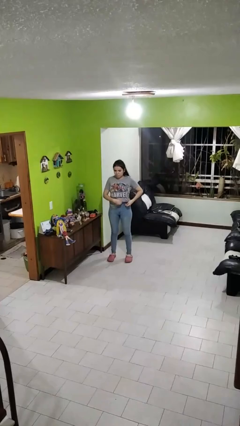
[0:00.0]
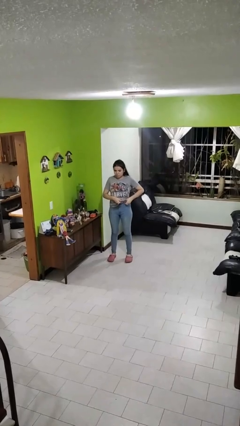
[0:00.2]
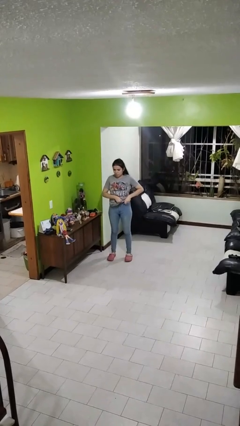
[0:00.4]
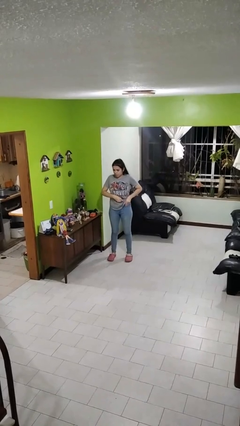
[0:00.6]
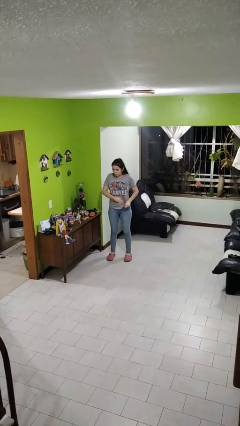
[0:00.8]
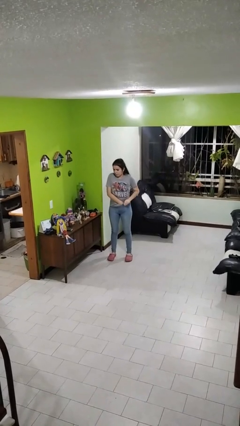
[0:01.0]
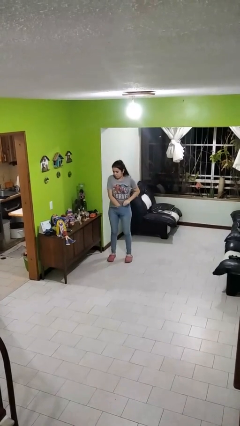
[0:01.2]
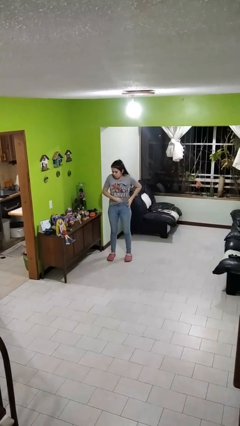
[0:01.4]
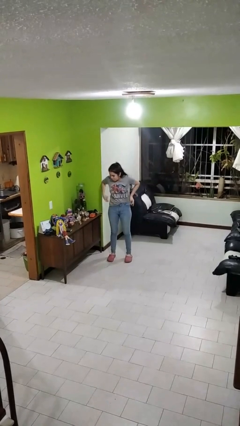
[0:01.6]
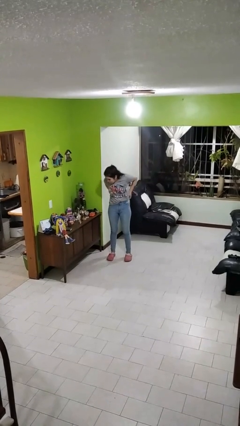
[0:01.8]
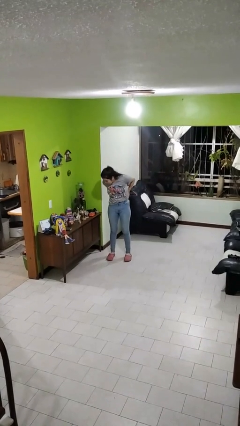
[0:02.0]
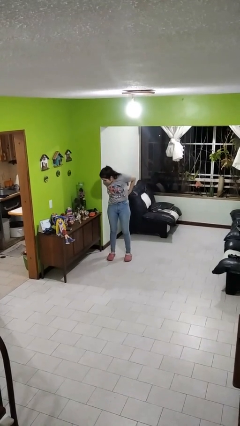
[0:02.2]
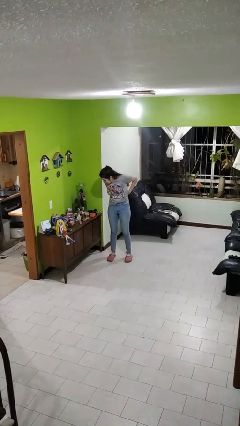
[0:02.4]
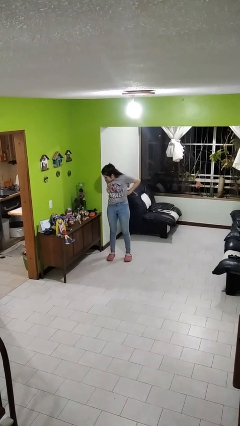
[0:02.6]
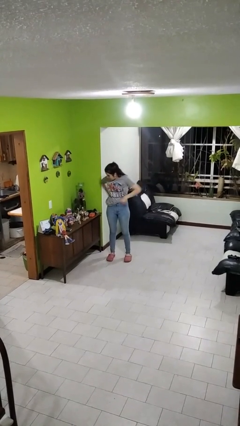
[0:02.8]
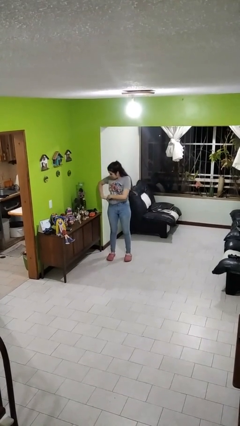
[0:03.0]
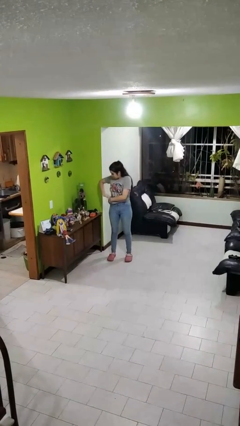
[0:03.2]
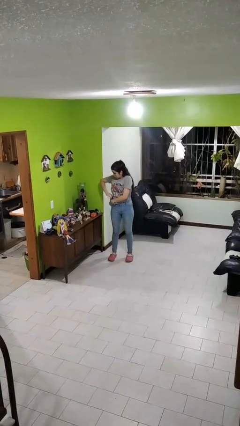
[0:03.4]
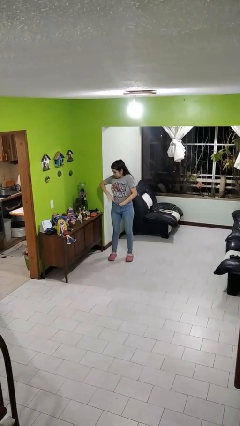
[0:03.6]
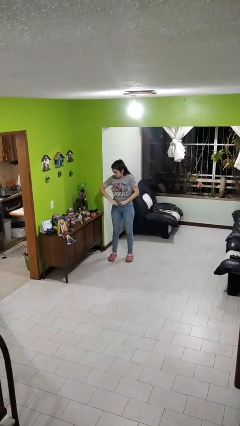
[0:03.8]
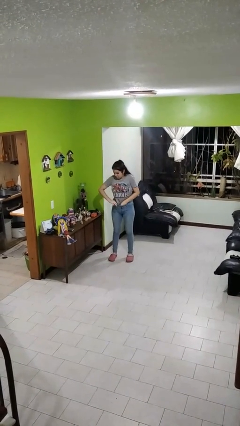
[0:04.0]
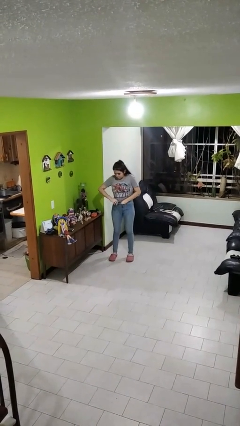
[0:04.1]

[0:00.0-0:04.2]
person tucks in shirt

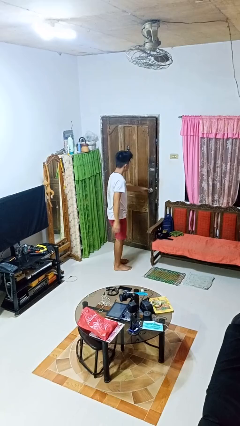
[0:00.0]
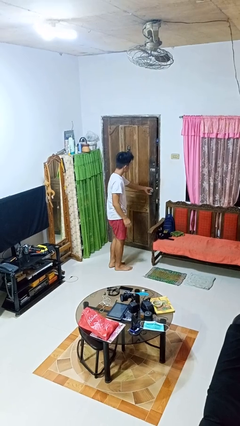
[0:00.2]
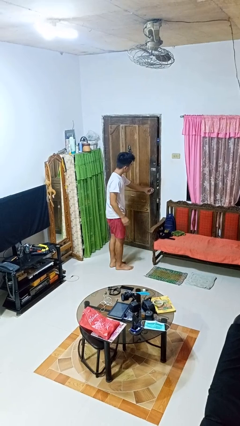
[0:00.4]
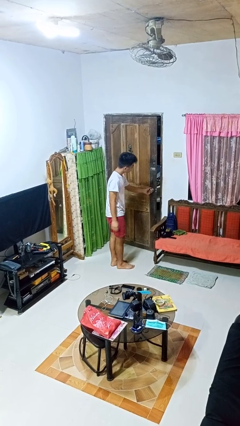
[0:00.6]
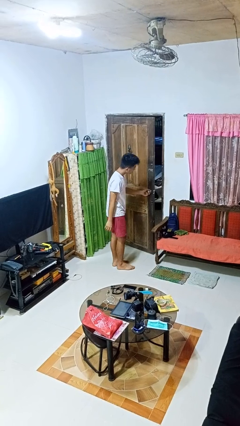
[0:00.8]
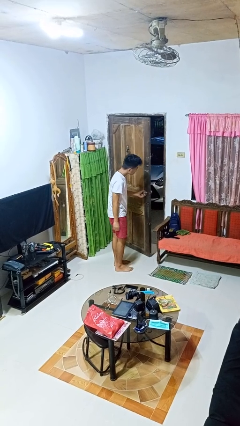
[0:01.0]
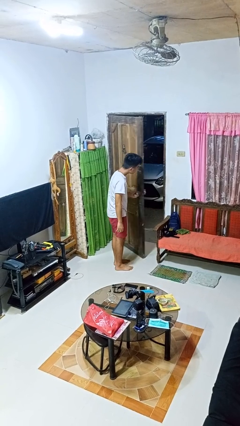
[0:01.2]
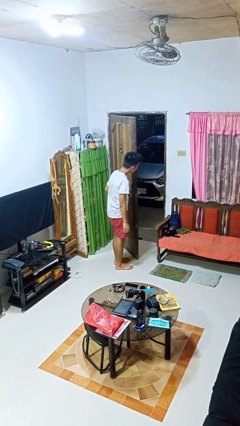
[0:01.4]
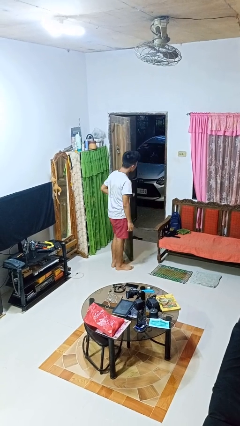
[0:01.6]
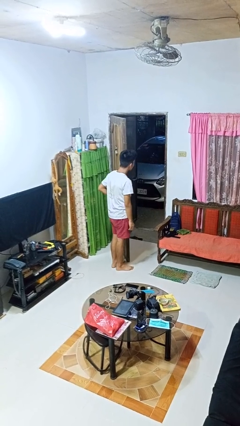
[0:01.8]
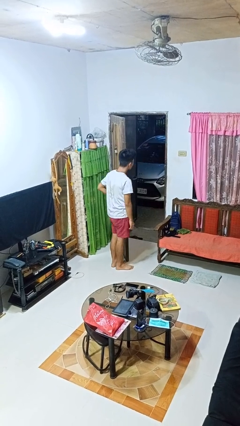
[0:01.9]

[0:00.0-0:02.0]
person opens facility door

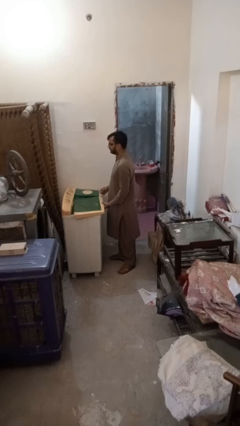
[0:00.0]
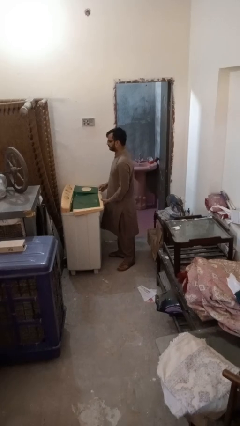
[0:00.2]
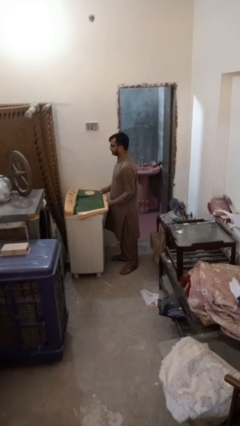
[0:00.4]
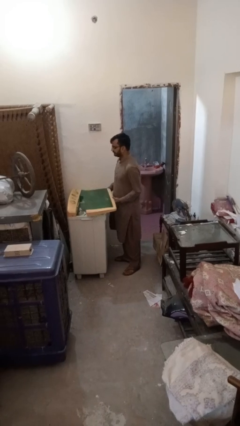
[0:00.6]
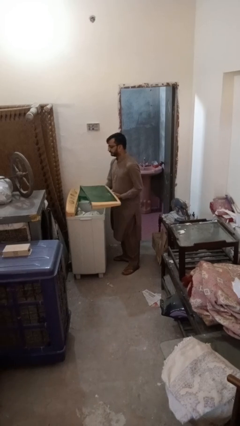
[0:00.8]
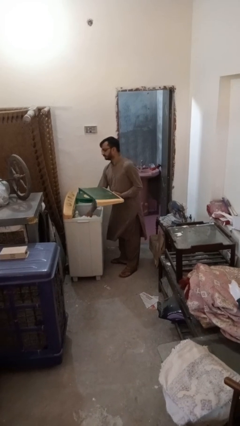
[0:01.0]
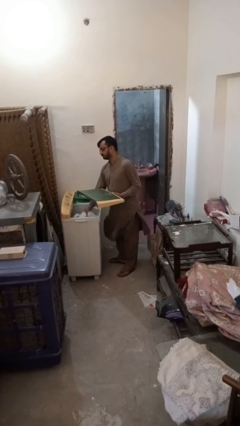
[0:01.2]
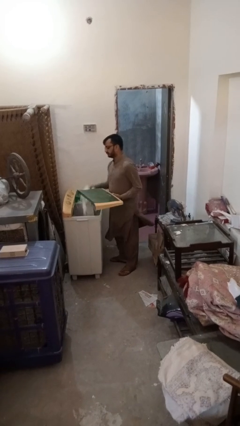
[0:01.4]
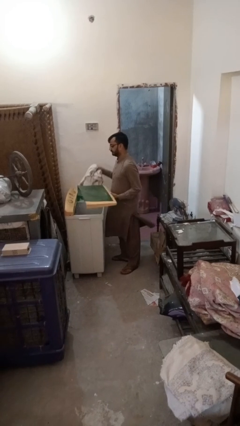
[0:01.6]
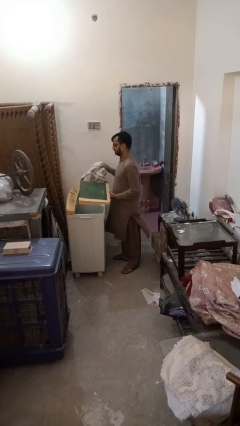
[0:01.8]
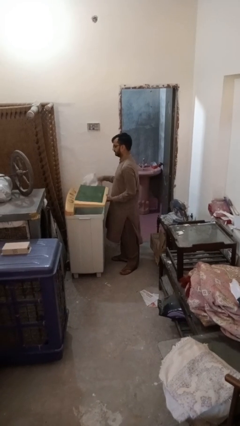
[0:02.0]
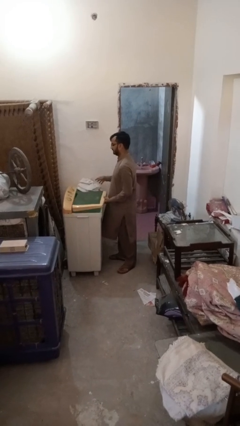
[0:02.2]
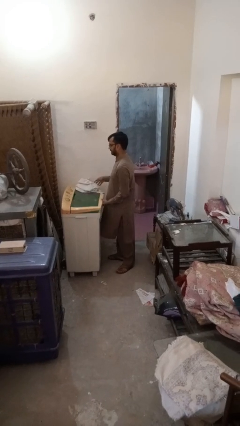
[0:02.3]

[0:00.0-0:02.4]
person unloads clotheswasher

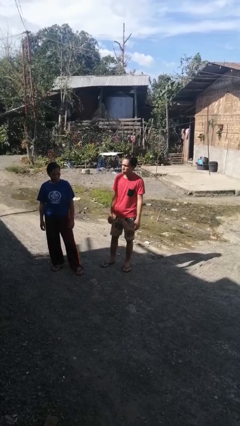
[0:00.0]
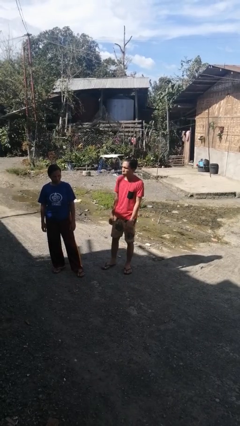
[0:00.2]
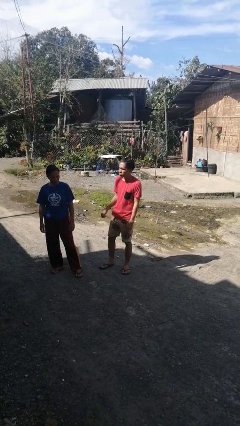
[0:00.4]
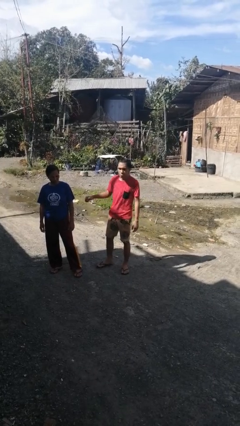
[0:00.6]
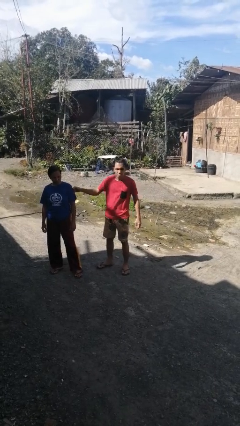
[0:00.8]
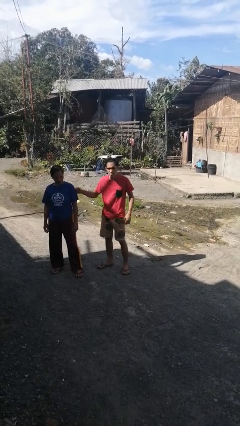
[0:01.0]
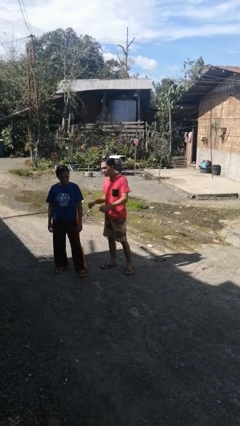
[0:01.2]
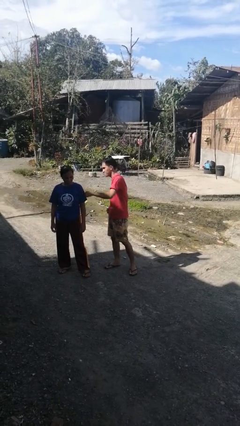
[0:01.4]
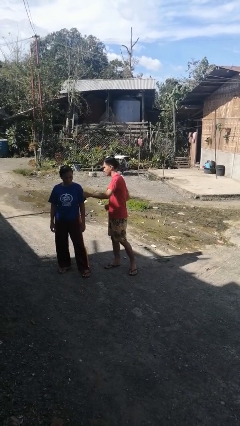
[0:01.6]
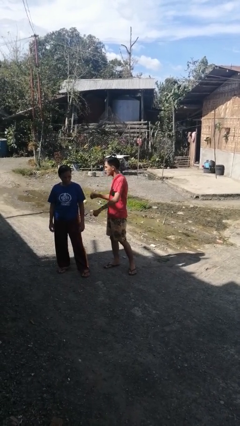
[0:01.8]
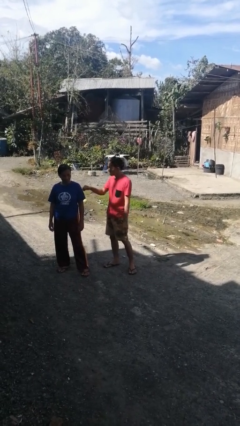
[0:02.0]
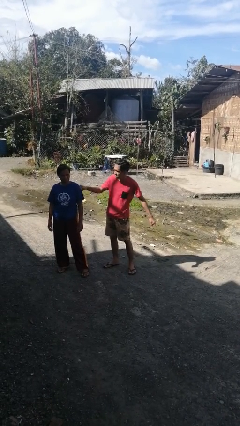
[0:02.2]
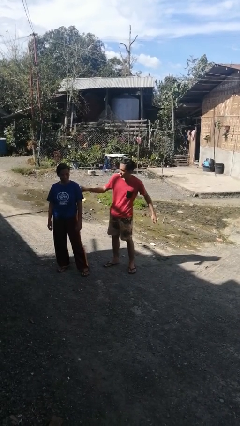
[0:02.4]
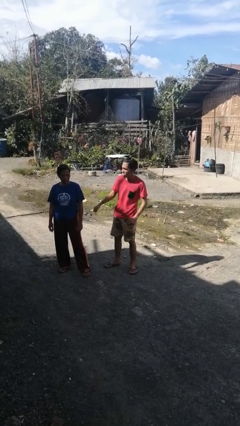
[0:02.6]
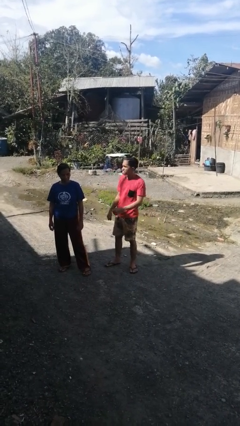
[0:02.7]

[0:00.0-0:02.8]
person pounds shoulders of person

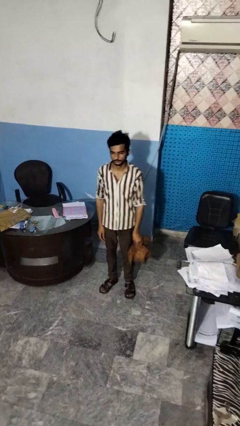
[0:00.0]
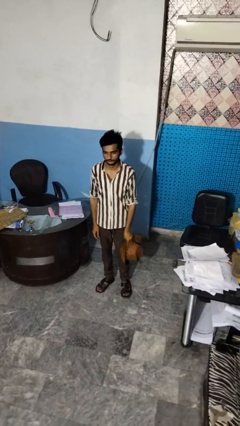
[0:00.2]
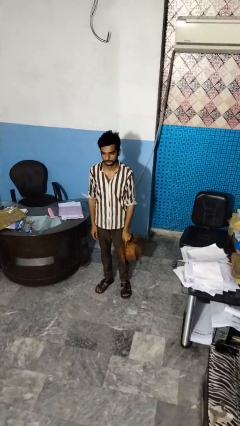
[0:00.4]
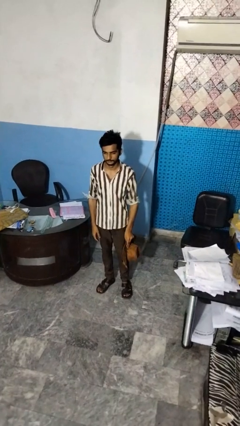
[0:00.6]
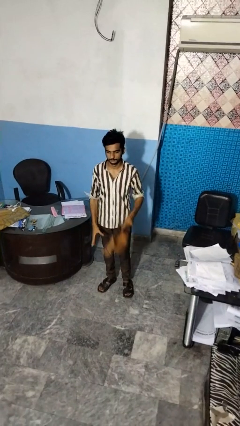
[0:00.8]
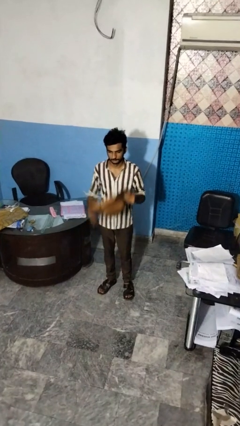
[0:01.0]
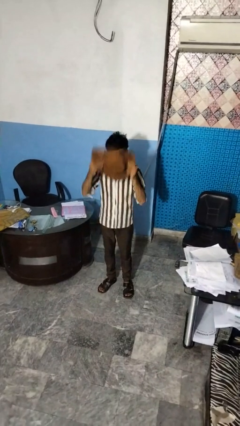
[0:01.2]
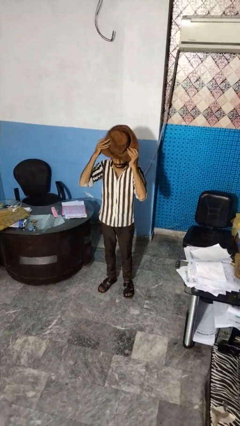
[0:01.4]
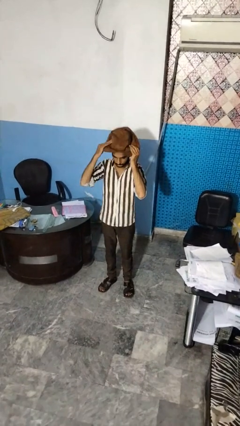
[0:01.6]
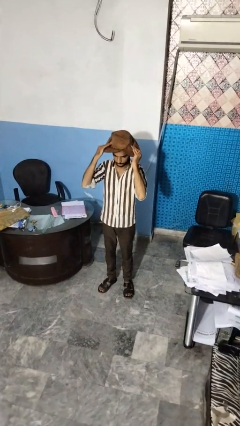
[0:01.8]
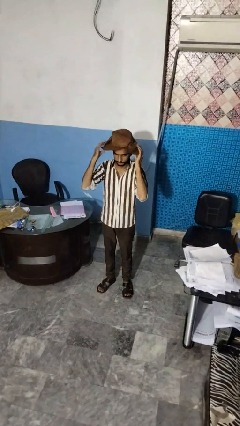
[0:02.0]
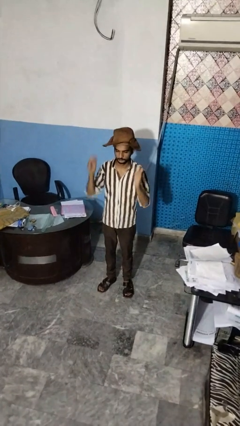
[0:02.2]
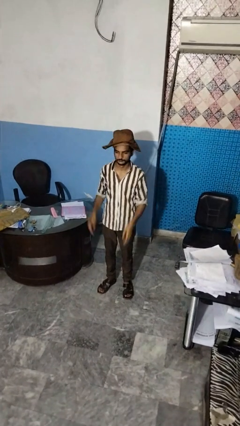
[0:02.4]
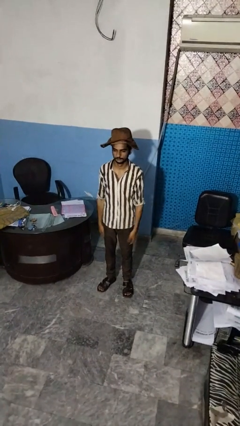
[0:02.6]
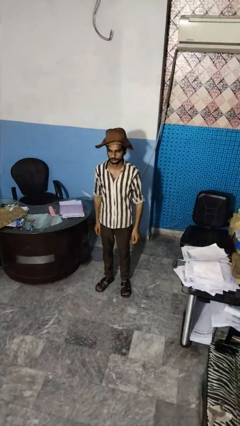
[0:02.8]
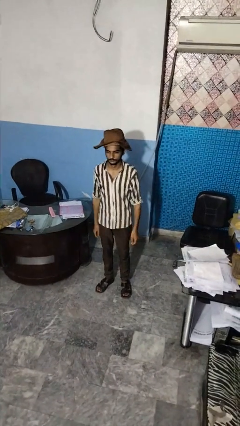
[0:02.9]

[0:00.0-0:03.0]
person puts on hat

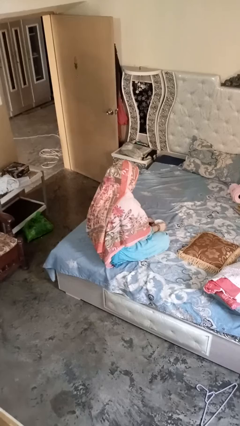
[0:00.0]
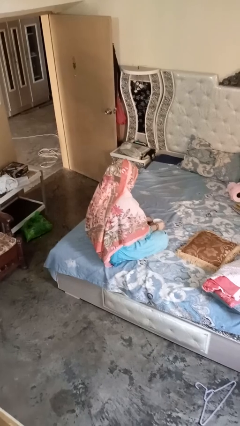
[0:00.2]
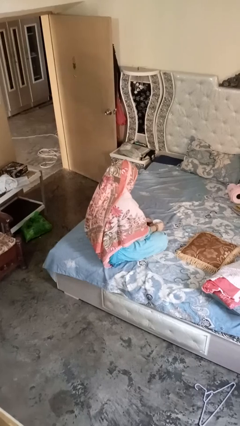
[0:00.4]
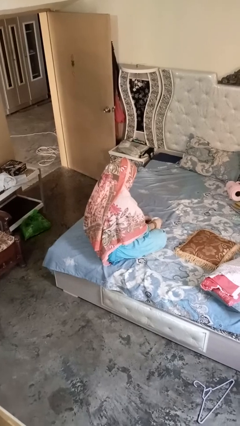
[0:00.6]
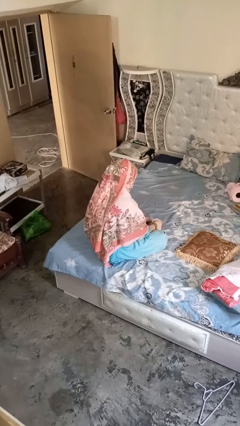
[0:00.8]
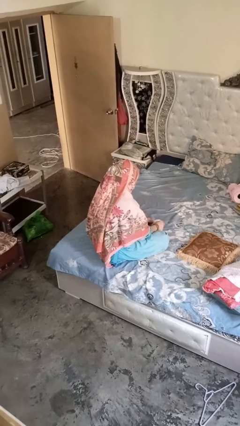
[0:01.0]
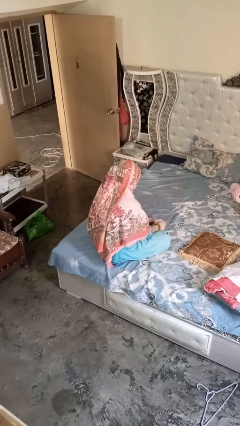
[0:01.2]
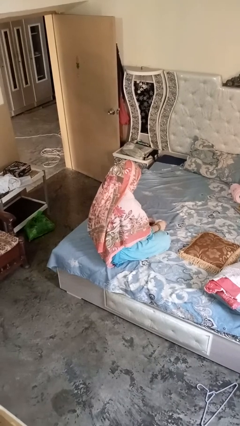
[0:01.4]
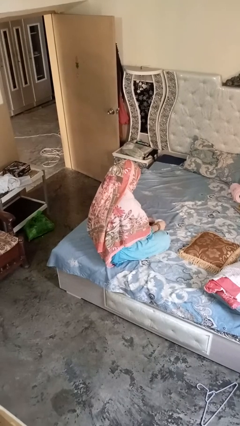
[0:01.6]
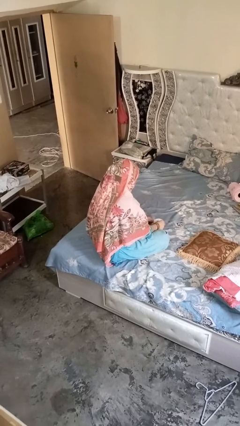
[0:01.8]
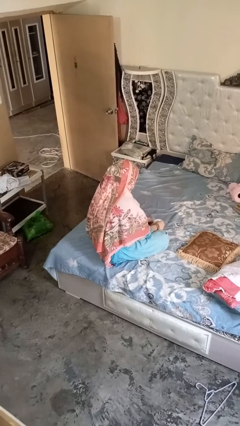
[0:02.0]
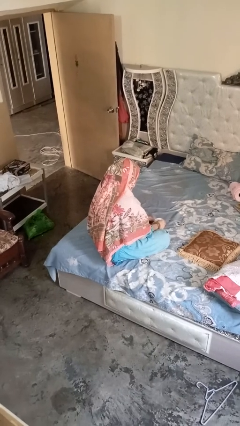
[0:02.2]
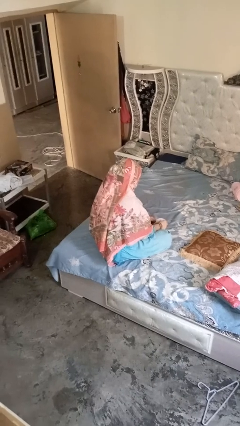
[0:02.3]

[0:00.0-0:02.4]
person stirs mug
